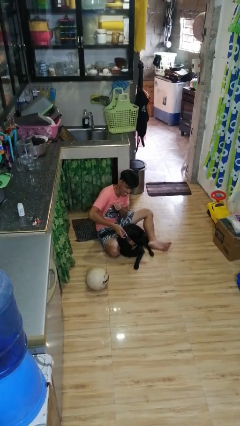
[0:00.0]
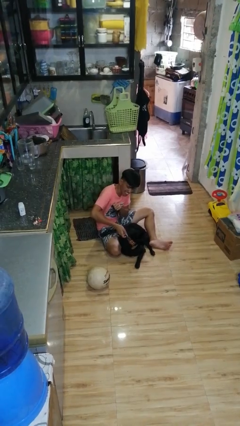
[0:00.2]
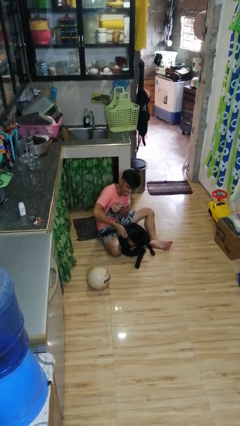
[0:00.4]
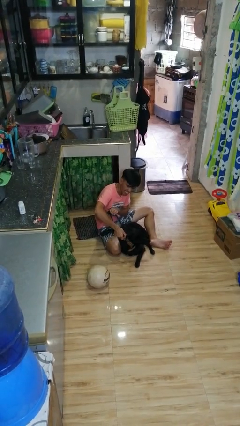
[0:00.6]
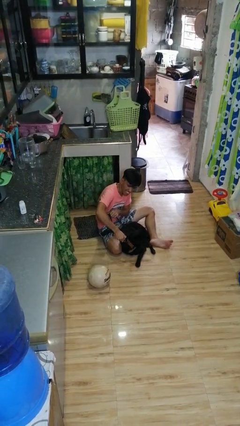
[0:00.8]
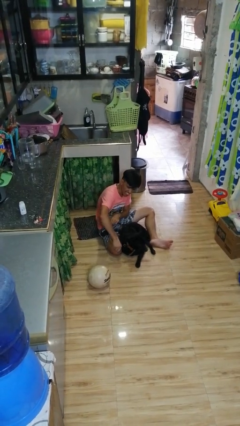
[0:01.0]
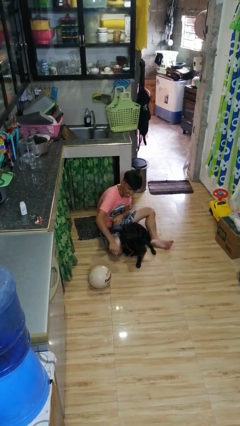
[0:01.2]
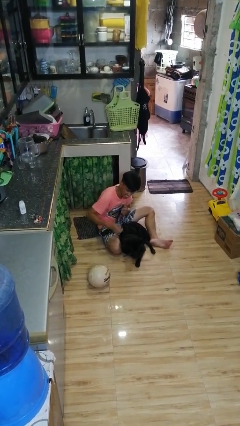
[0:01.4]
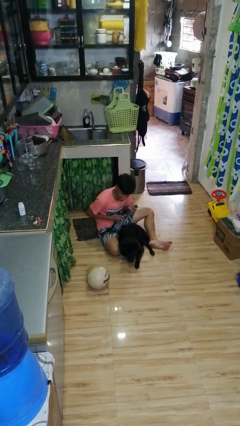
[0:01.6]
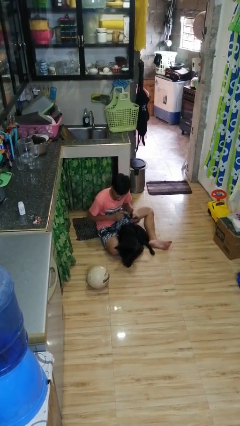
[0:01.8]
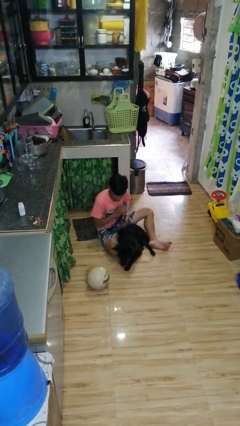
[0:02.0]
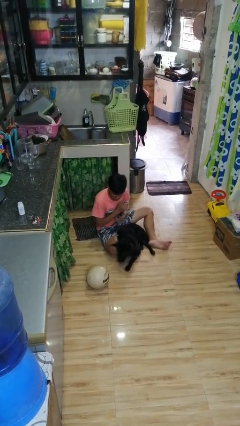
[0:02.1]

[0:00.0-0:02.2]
person unattaches leash from dog

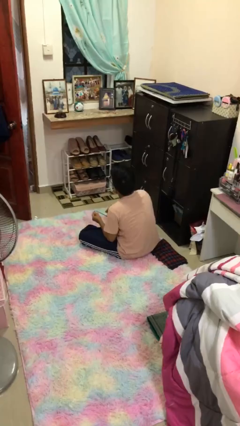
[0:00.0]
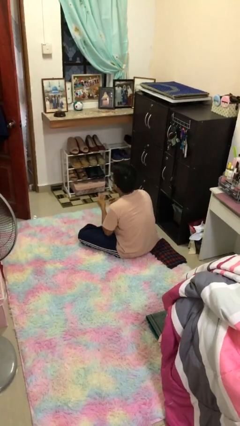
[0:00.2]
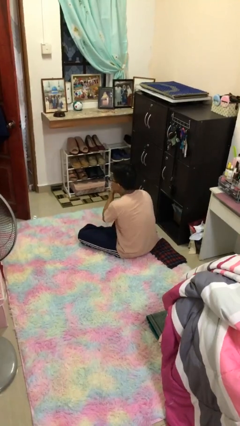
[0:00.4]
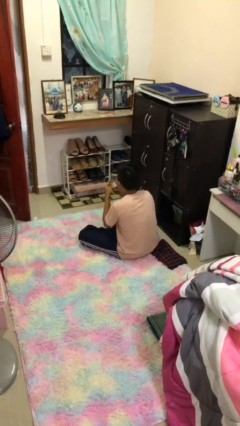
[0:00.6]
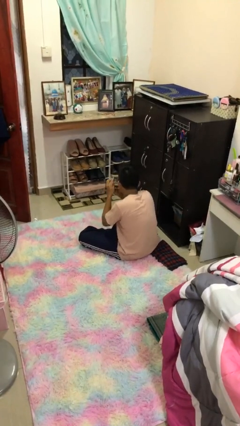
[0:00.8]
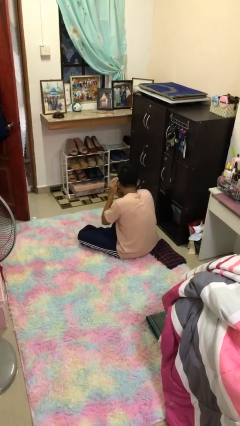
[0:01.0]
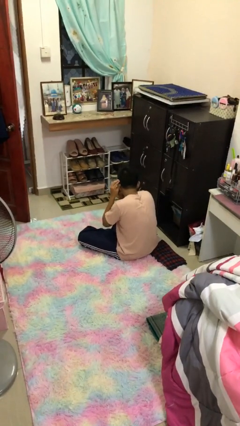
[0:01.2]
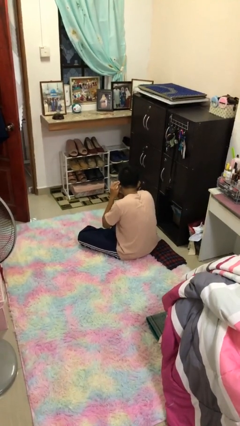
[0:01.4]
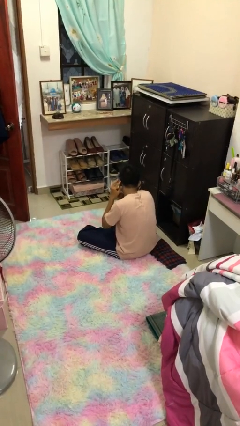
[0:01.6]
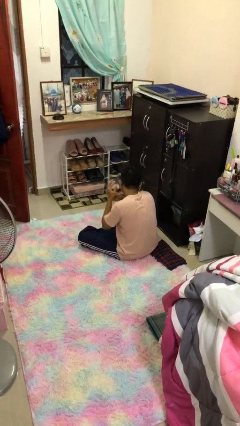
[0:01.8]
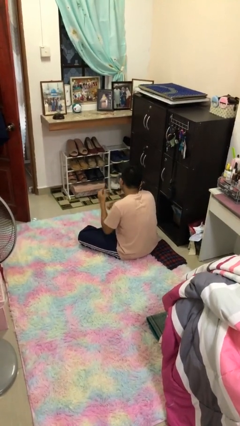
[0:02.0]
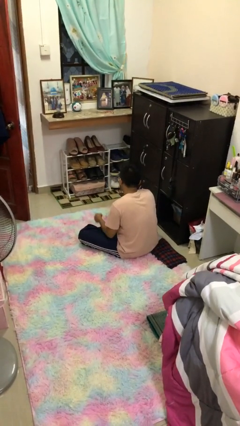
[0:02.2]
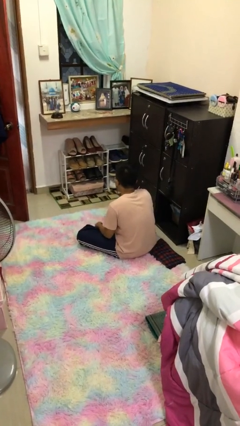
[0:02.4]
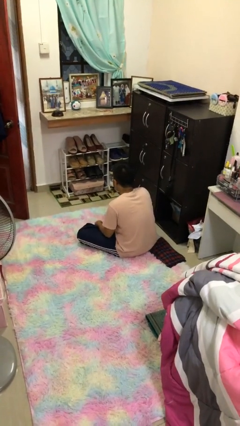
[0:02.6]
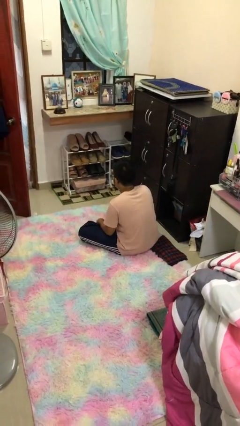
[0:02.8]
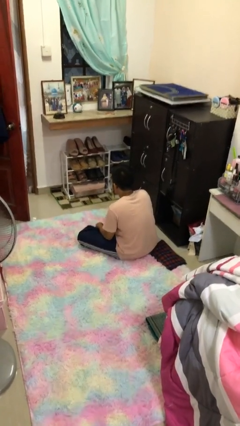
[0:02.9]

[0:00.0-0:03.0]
person puts on earrings

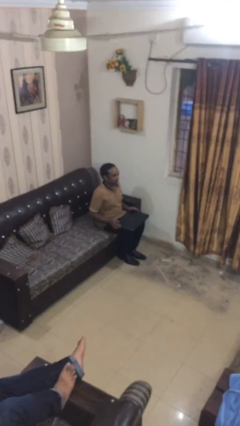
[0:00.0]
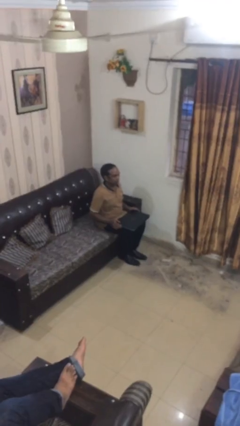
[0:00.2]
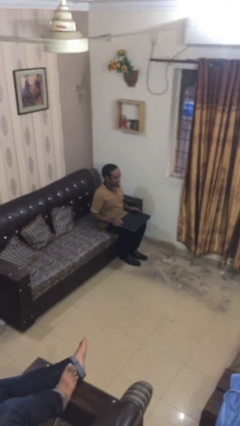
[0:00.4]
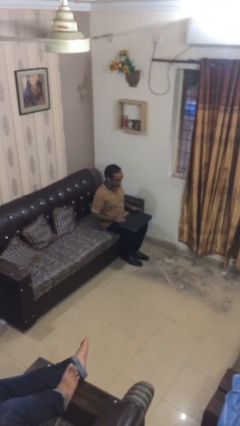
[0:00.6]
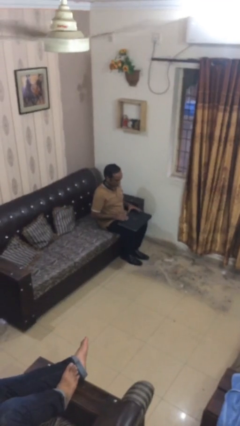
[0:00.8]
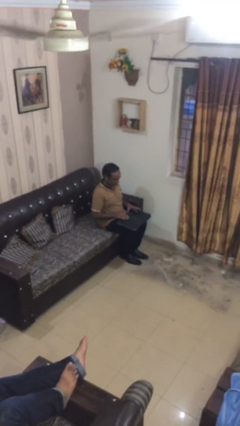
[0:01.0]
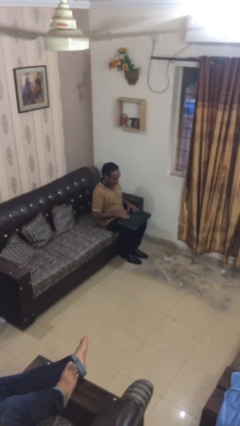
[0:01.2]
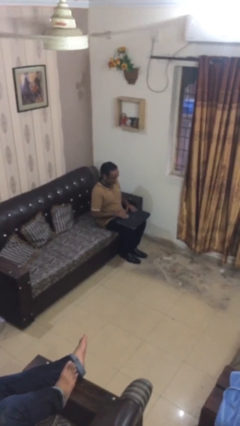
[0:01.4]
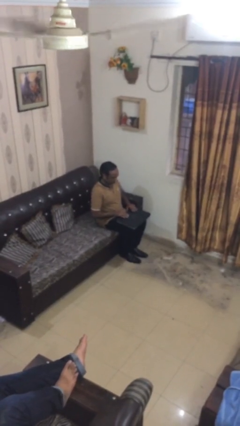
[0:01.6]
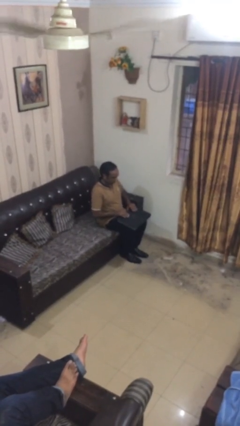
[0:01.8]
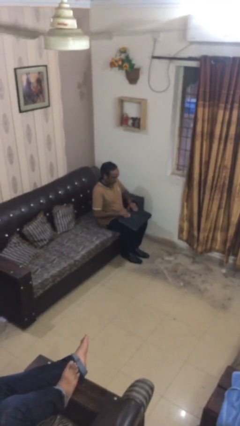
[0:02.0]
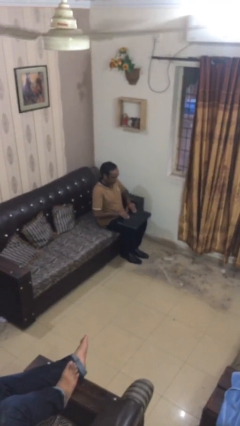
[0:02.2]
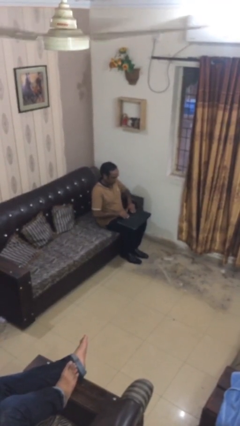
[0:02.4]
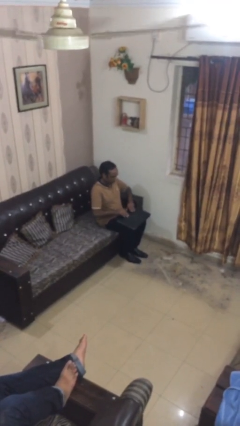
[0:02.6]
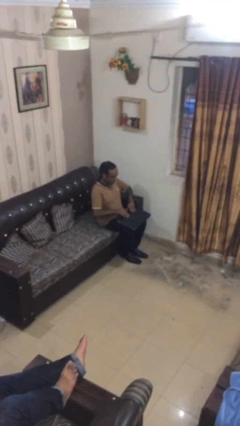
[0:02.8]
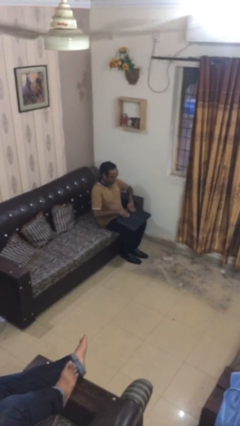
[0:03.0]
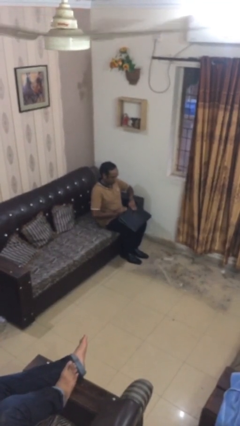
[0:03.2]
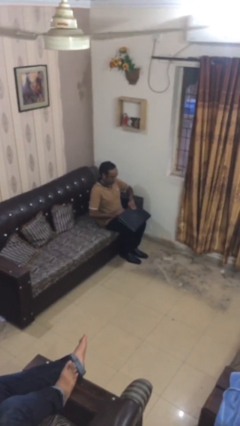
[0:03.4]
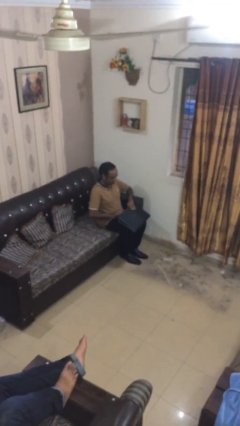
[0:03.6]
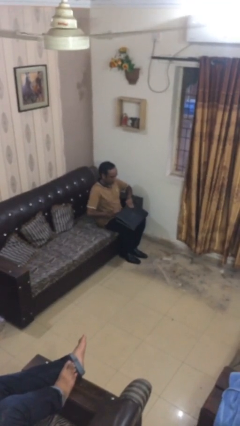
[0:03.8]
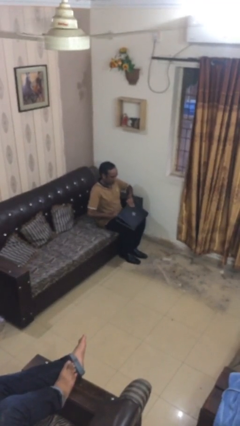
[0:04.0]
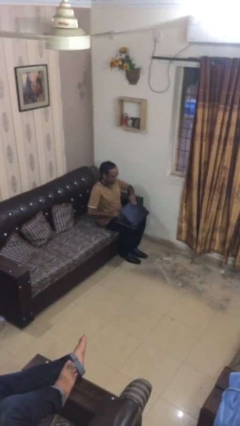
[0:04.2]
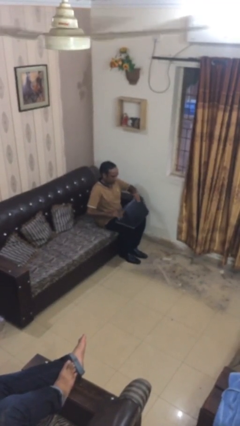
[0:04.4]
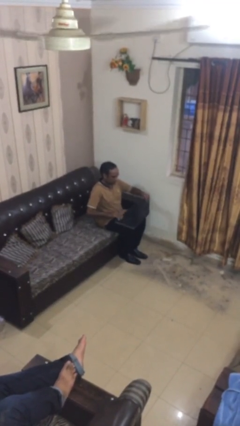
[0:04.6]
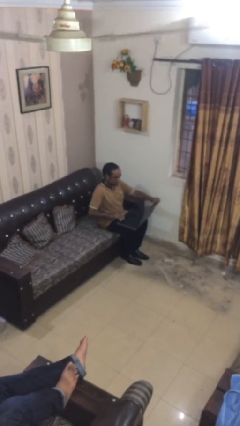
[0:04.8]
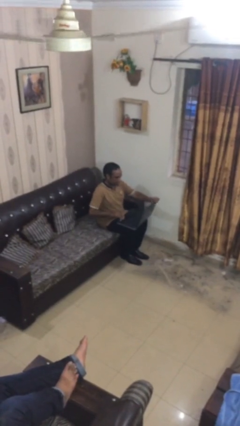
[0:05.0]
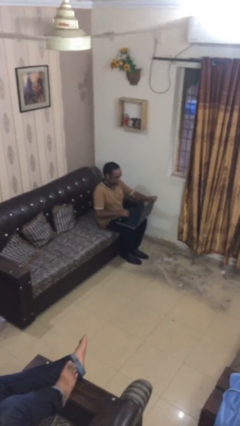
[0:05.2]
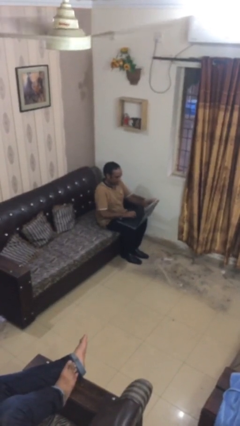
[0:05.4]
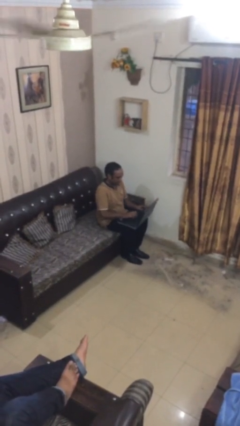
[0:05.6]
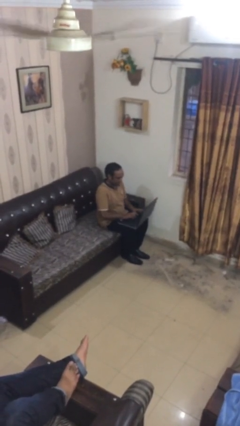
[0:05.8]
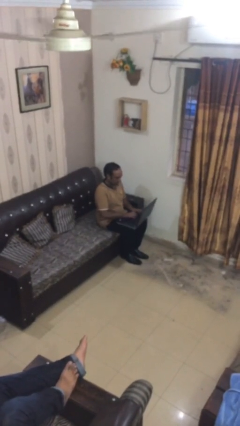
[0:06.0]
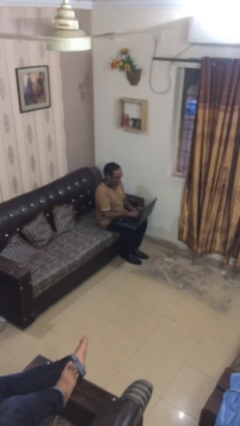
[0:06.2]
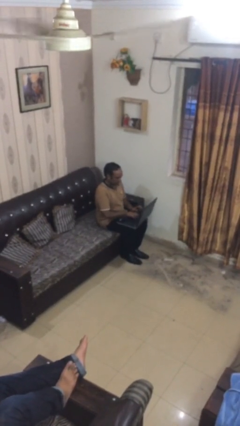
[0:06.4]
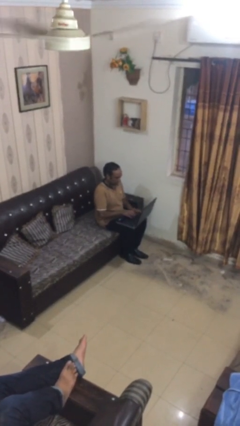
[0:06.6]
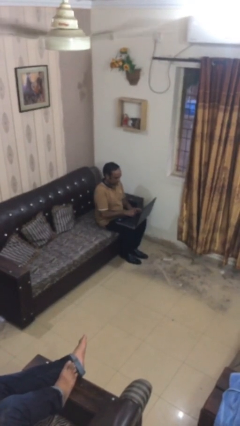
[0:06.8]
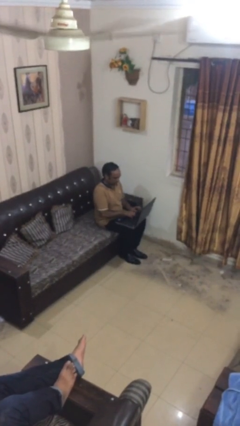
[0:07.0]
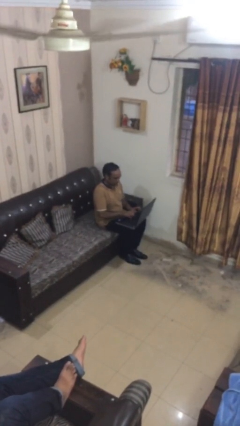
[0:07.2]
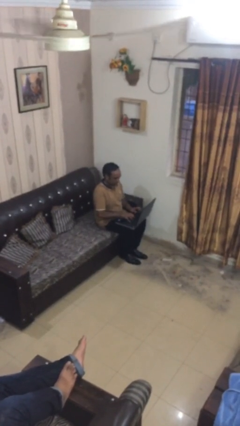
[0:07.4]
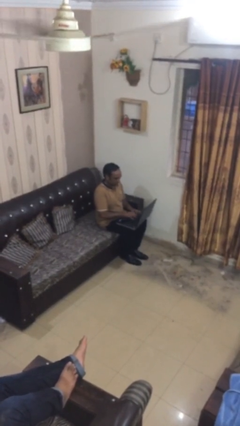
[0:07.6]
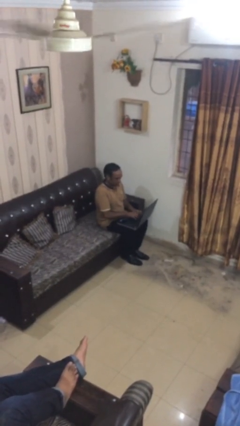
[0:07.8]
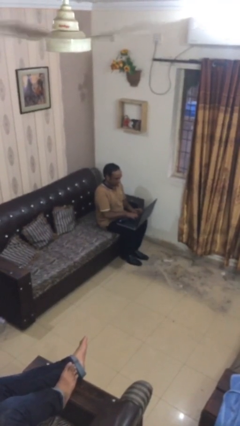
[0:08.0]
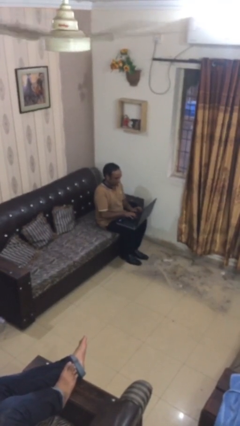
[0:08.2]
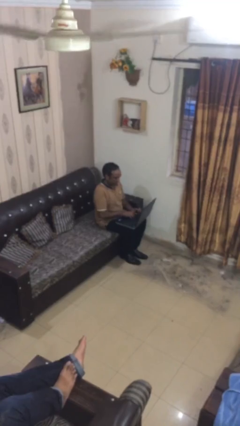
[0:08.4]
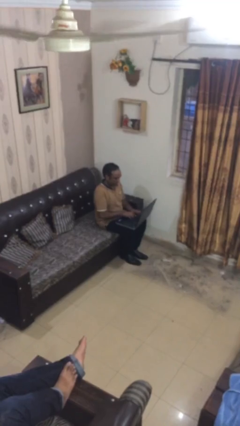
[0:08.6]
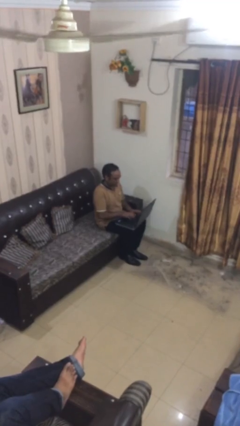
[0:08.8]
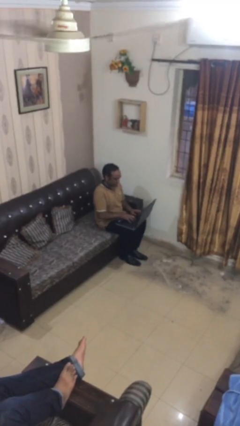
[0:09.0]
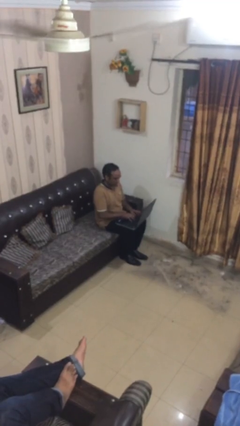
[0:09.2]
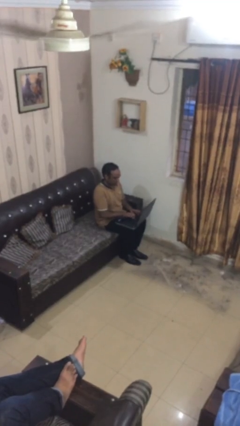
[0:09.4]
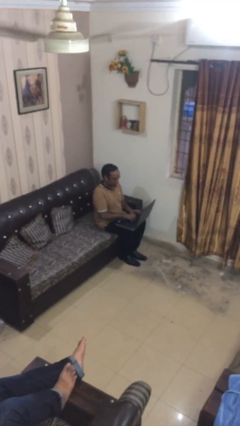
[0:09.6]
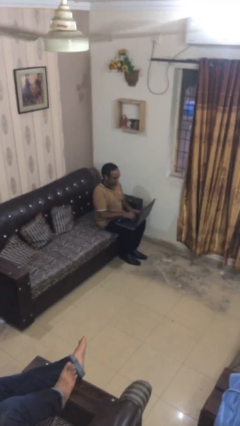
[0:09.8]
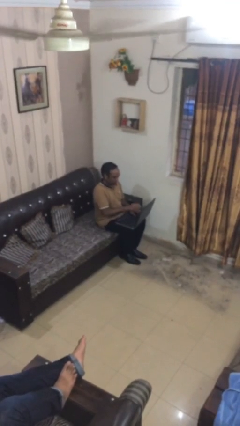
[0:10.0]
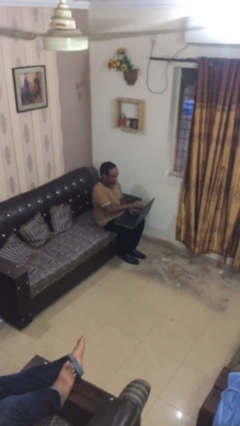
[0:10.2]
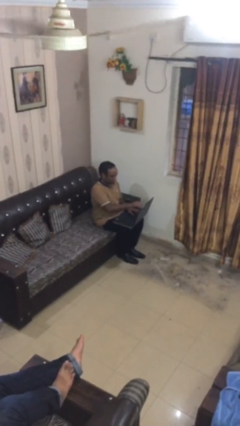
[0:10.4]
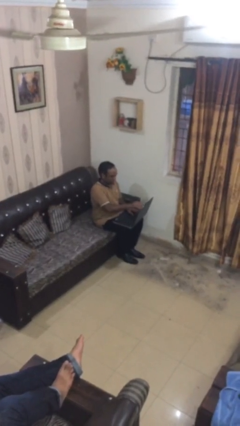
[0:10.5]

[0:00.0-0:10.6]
person interacts with laptop

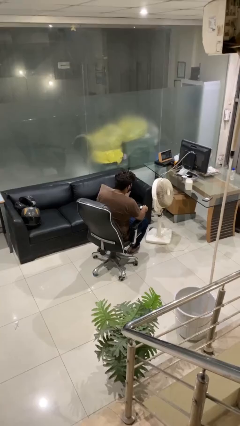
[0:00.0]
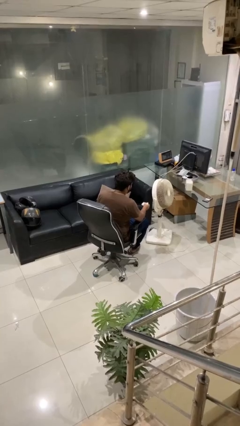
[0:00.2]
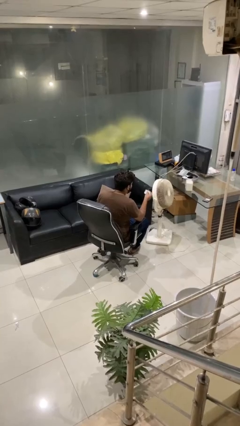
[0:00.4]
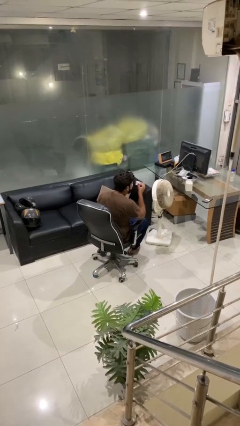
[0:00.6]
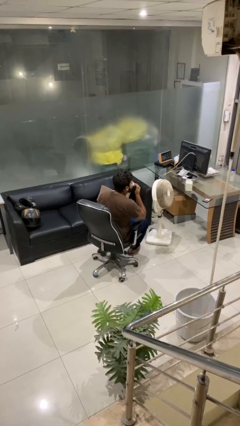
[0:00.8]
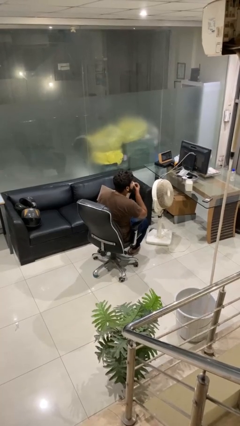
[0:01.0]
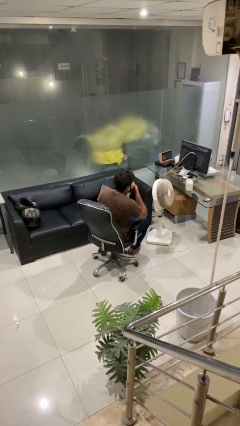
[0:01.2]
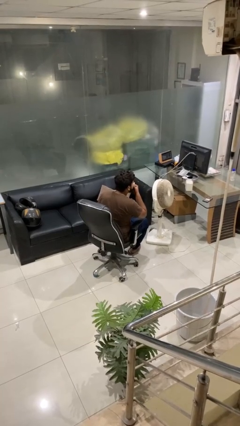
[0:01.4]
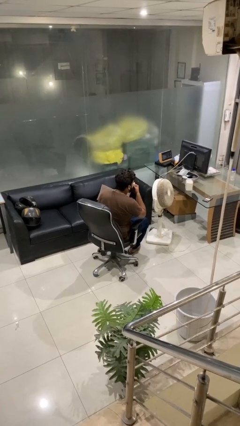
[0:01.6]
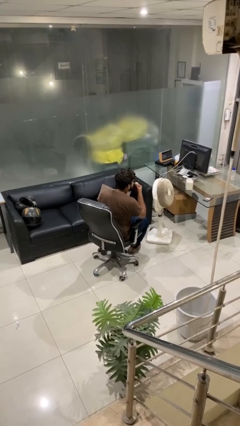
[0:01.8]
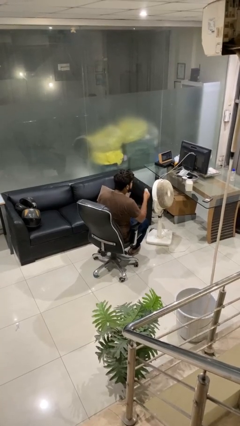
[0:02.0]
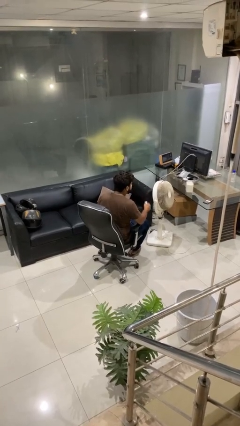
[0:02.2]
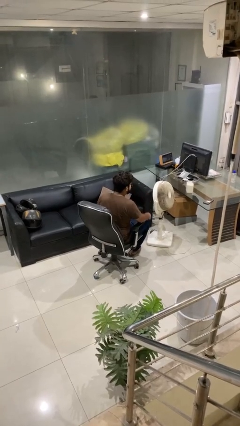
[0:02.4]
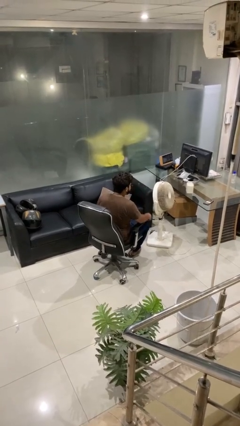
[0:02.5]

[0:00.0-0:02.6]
person blows nose
